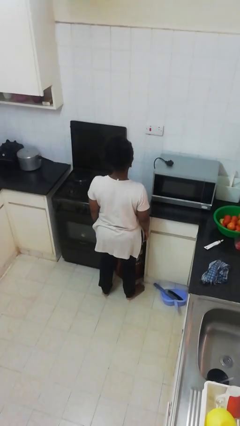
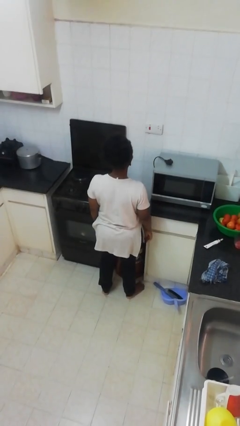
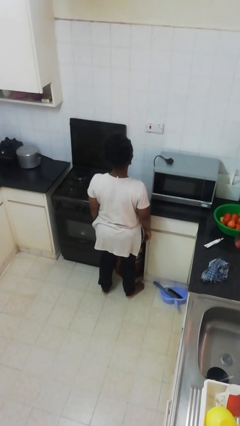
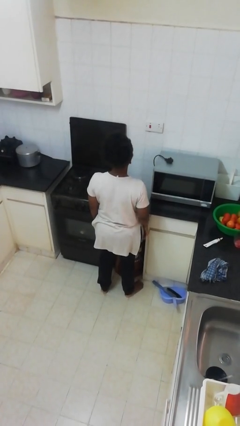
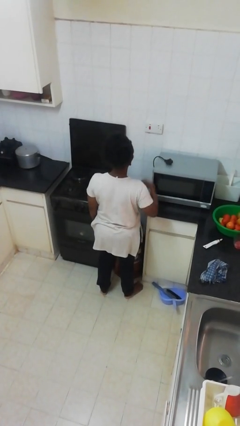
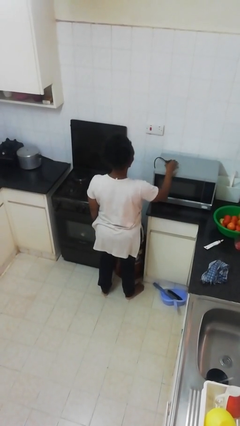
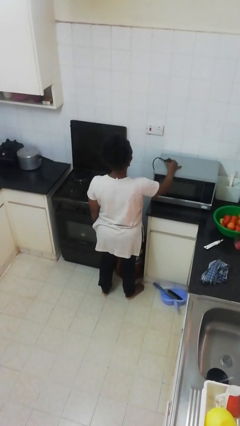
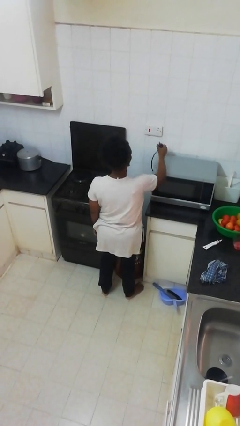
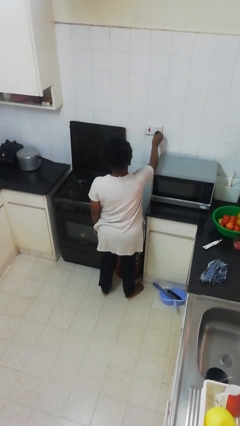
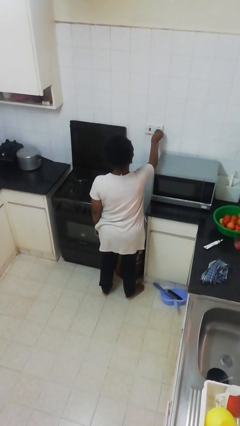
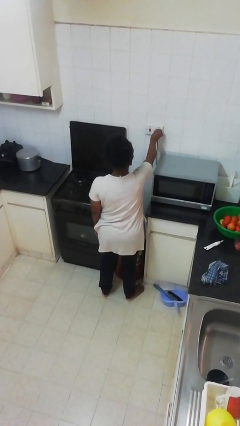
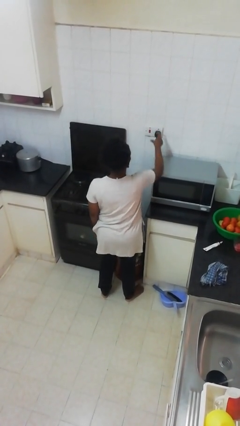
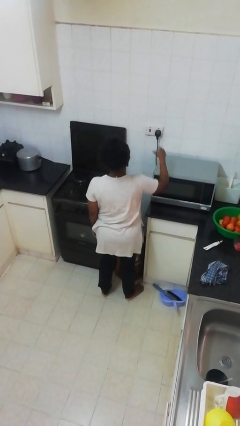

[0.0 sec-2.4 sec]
person plugs into electrical socket

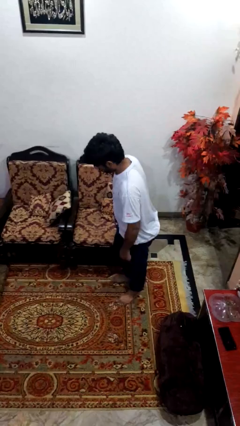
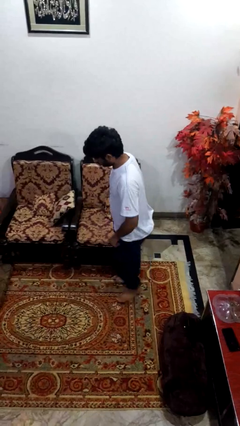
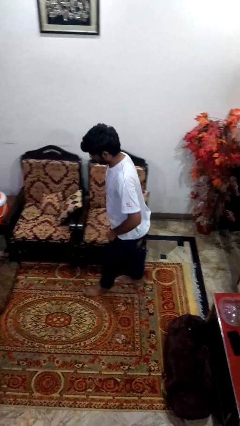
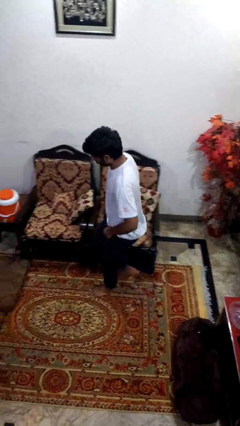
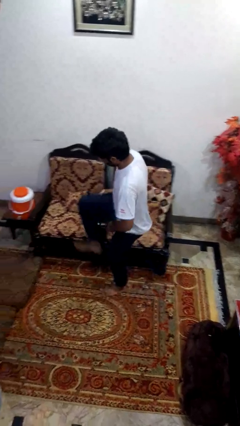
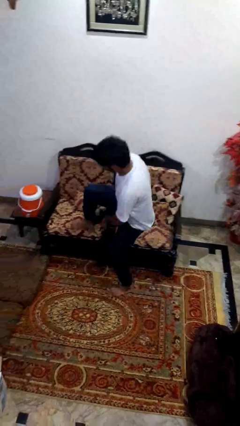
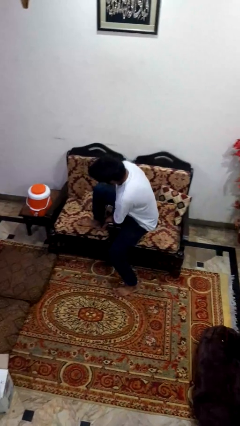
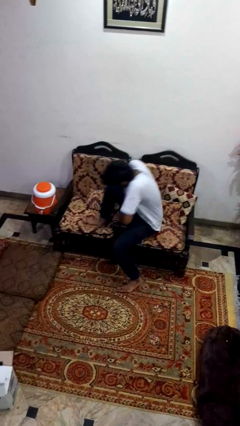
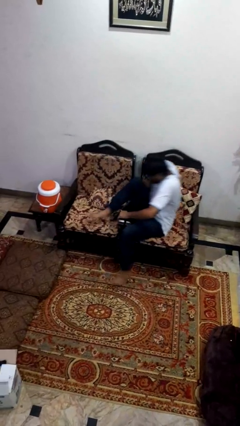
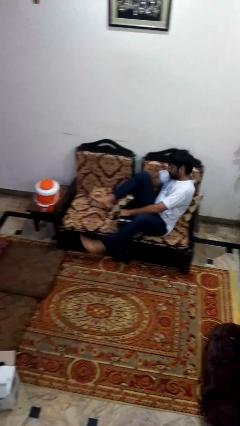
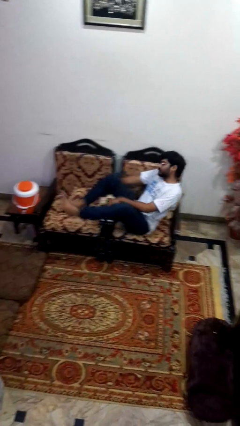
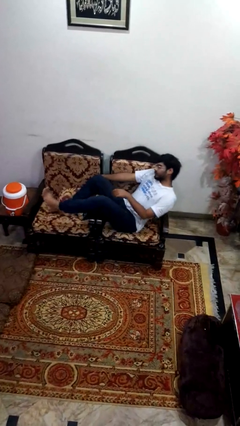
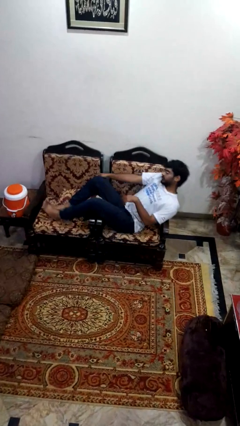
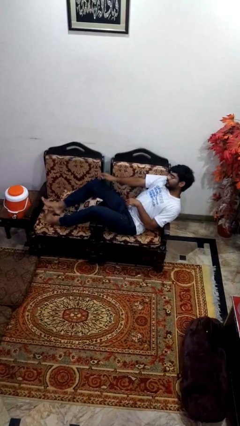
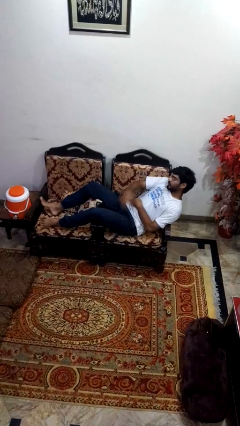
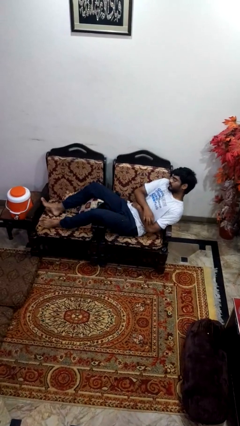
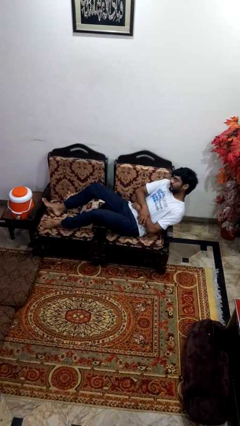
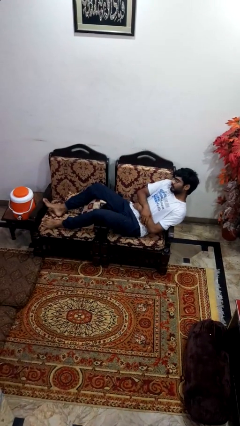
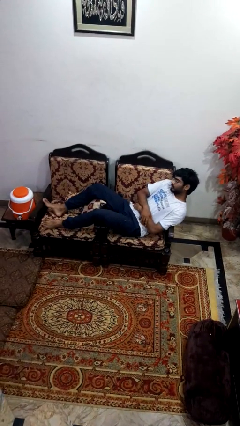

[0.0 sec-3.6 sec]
person lies down on couch

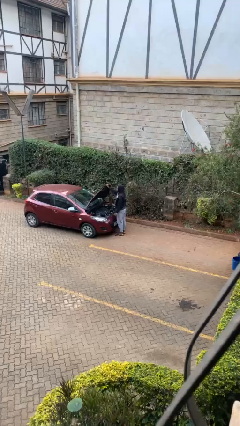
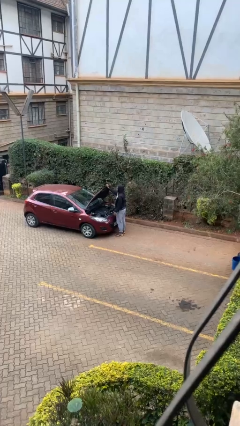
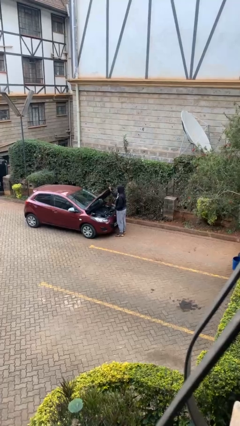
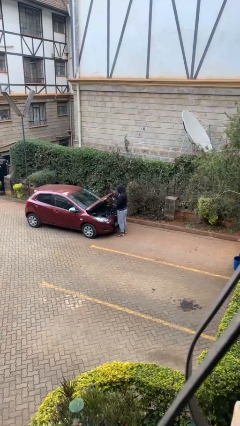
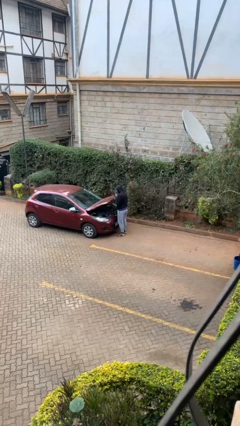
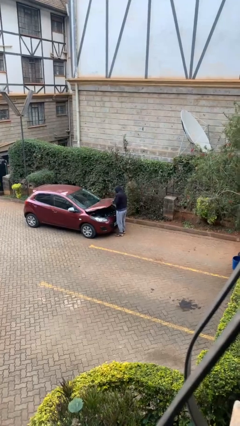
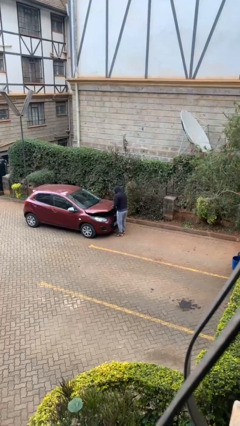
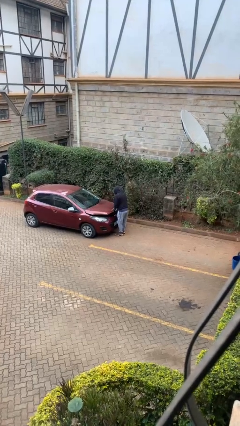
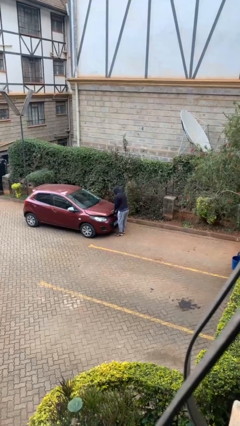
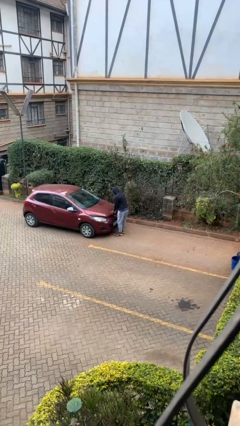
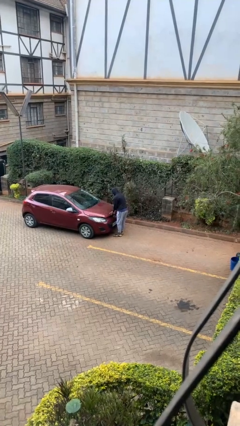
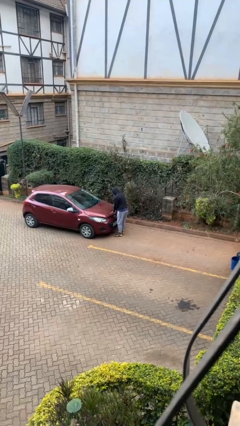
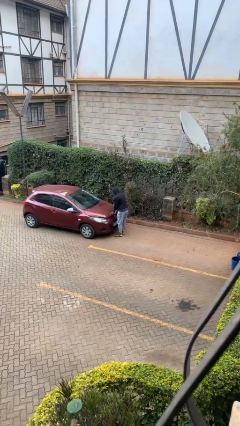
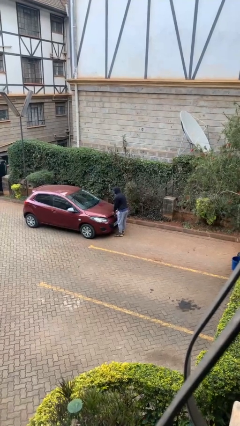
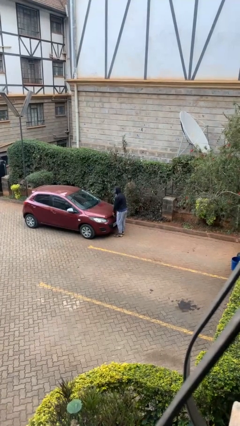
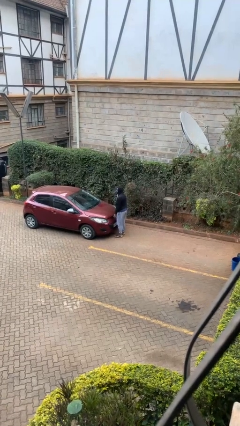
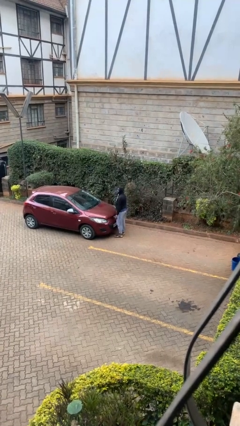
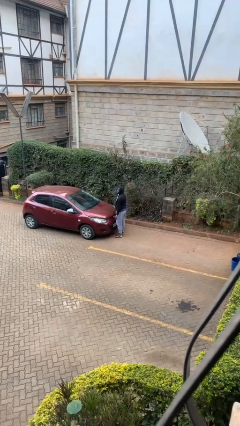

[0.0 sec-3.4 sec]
person closes car hood

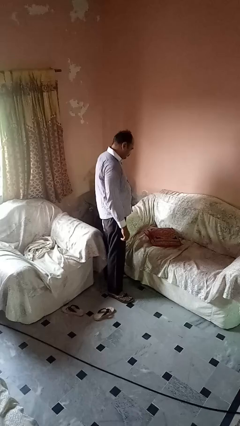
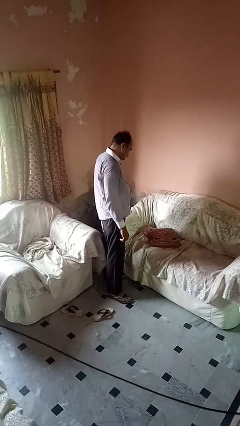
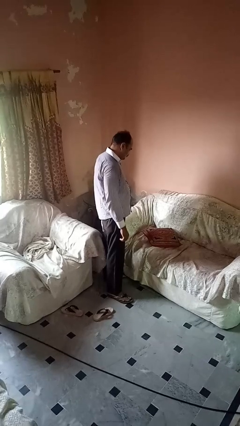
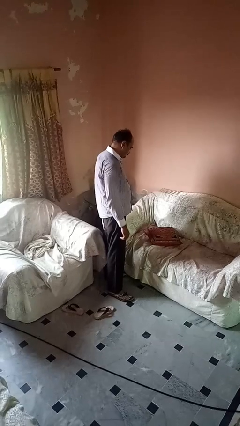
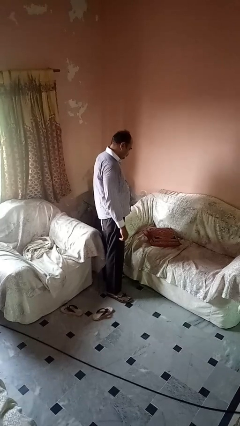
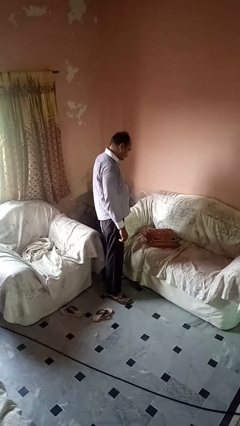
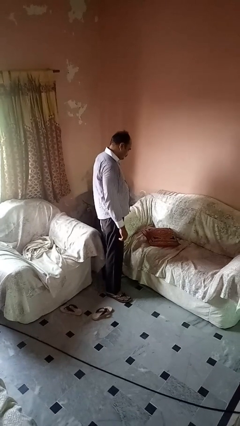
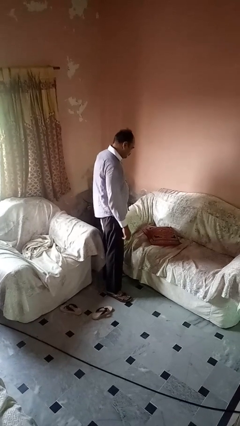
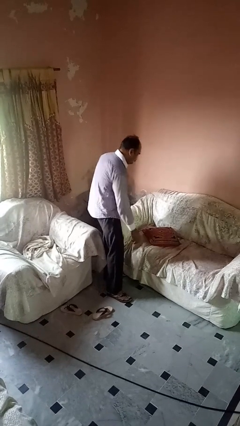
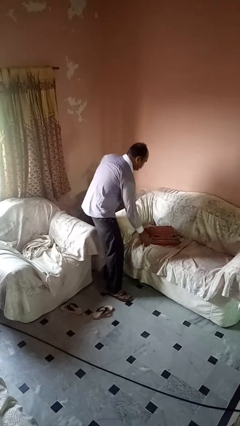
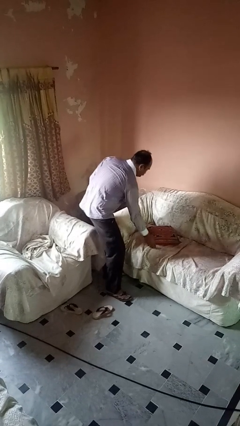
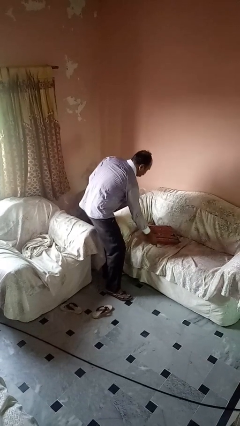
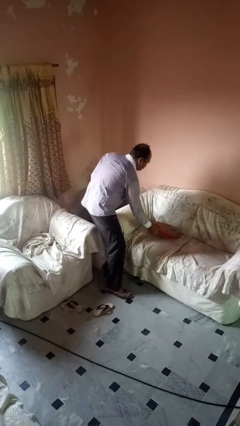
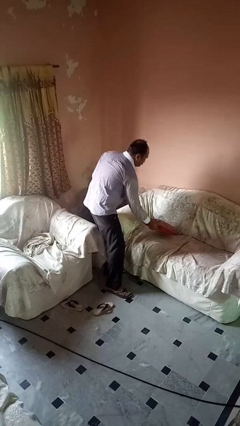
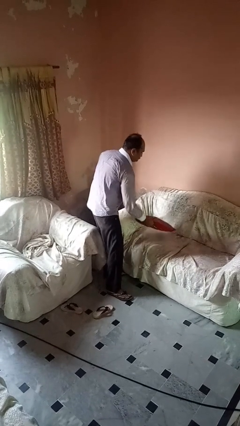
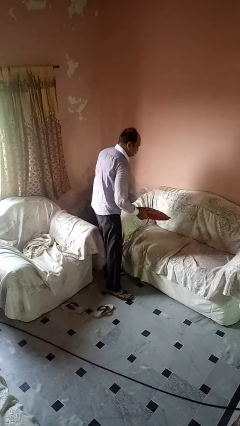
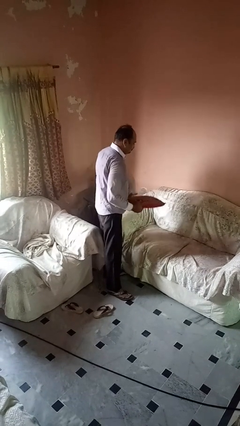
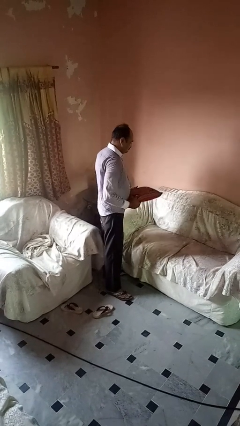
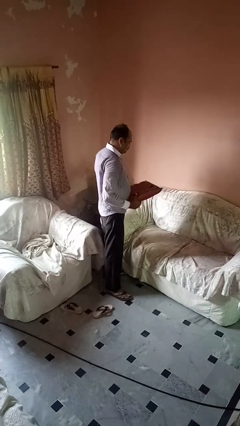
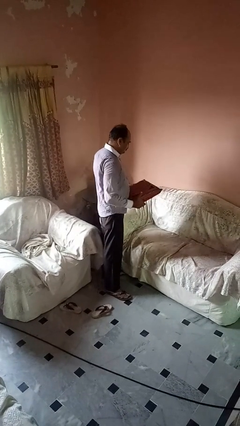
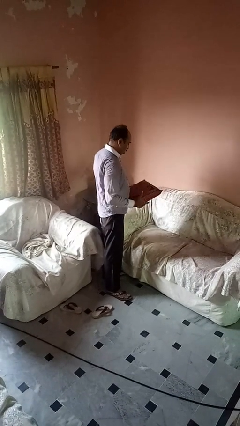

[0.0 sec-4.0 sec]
person picks up object from couch

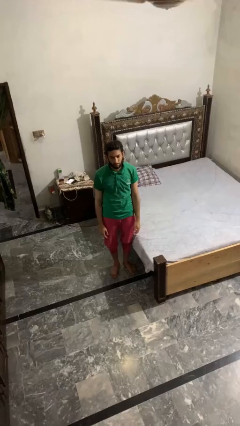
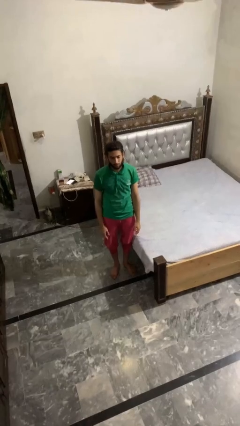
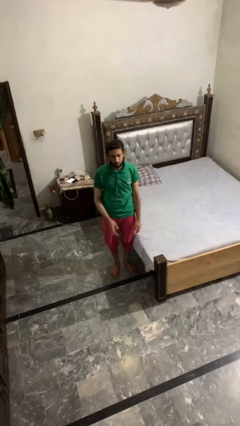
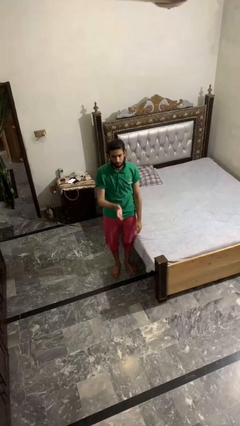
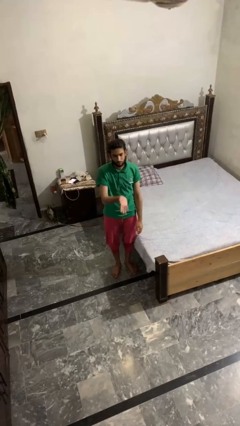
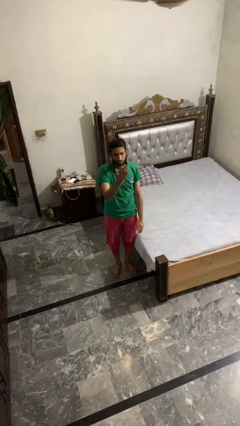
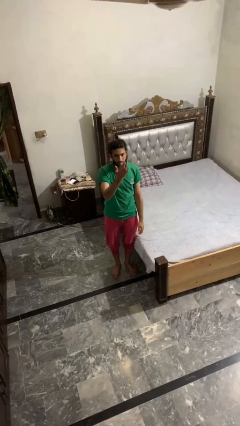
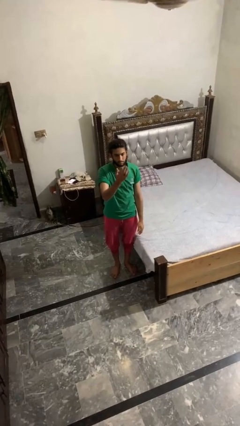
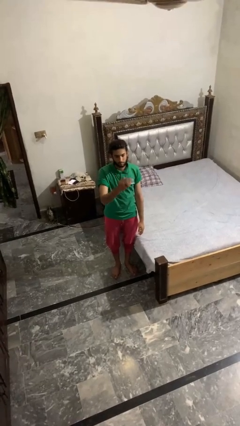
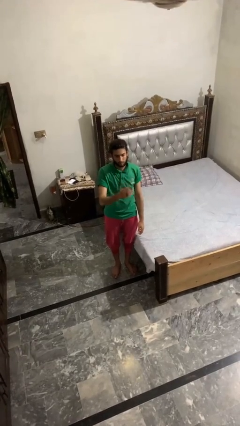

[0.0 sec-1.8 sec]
person gestures swipe up

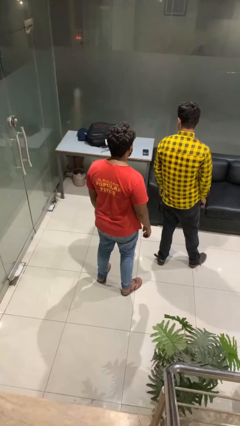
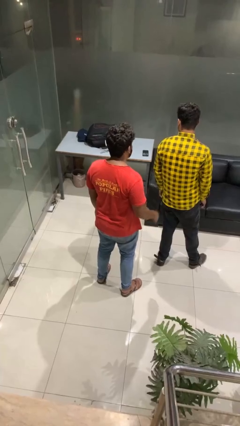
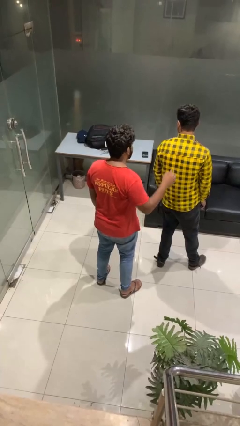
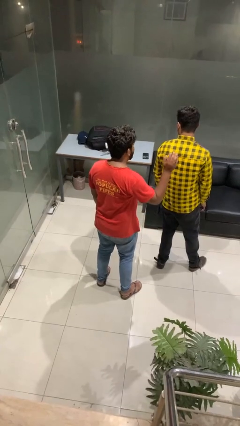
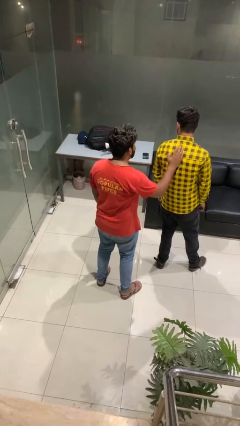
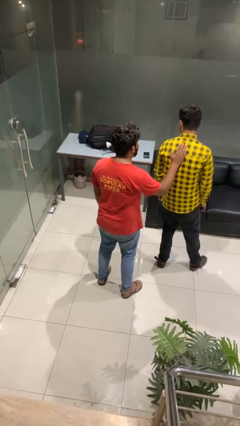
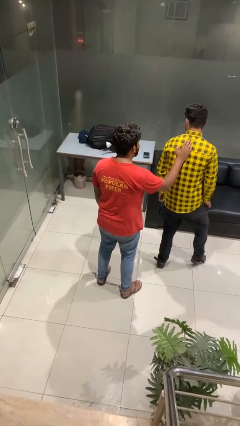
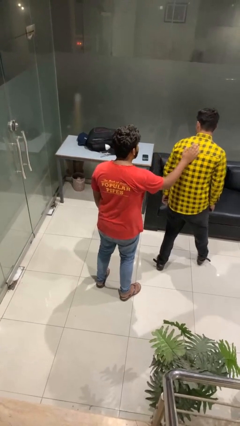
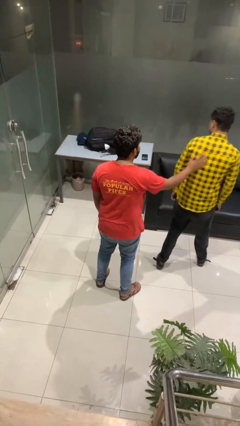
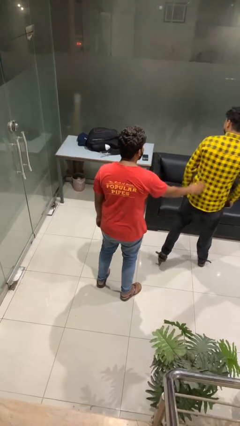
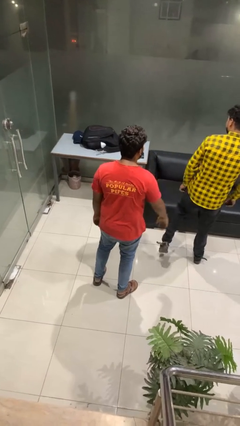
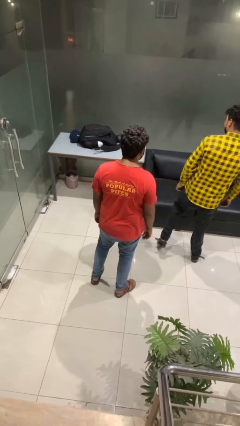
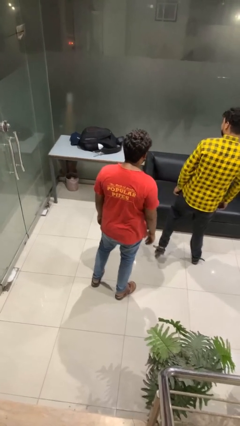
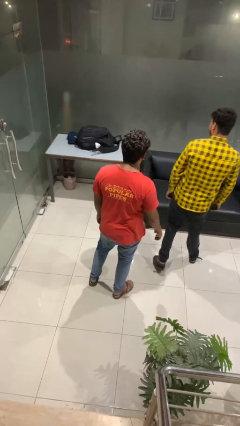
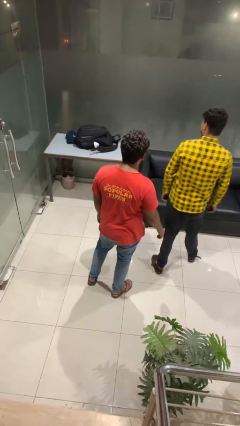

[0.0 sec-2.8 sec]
person shoves person
